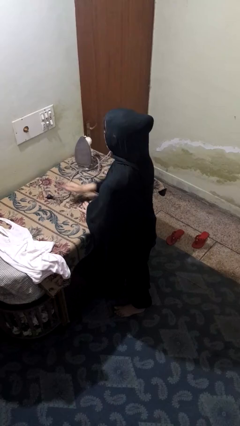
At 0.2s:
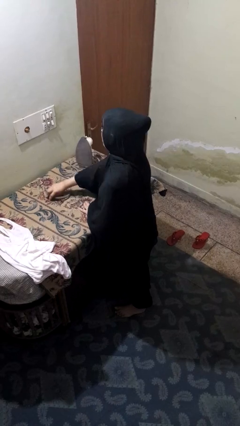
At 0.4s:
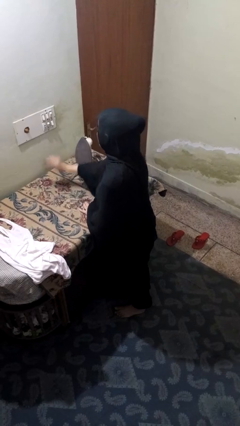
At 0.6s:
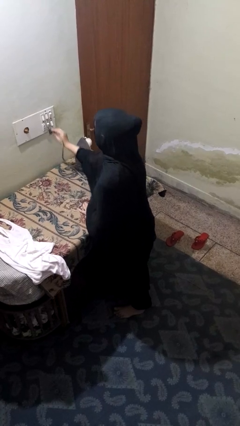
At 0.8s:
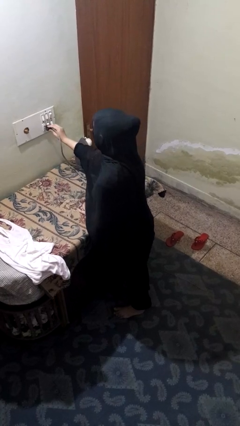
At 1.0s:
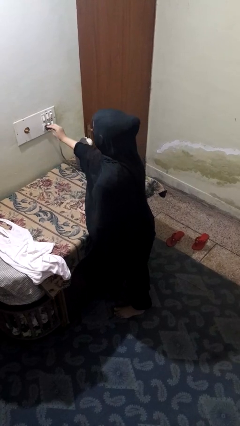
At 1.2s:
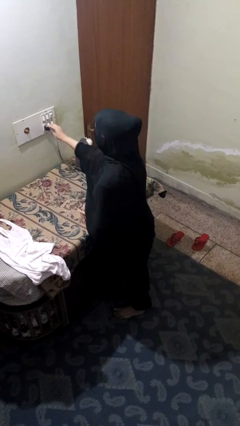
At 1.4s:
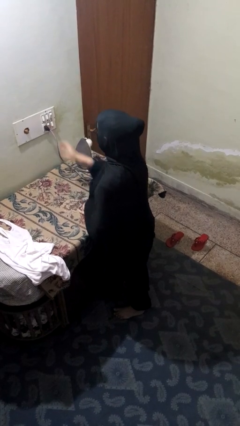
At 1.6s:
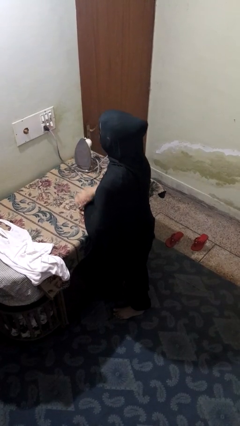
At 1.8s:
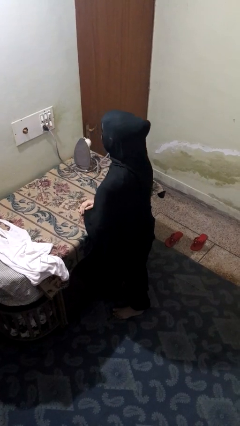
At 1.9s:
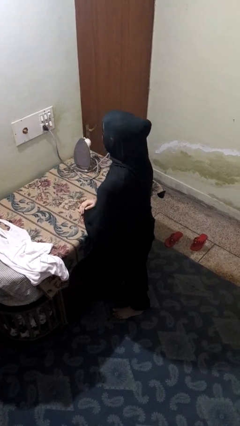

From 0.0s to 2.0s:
person plugs into electrical socket

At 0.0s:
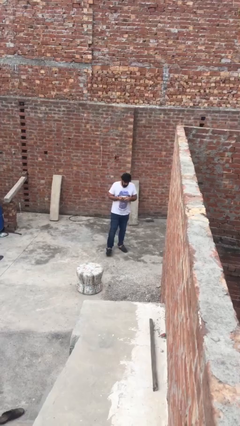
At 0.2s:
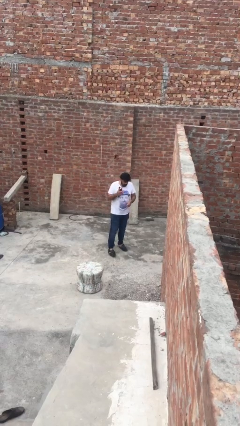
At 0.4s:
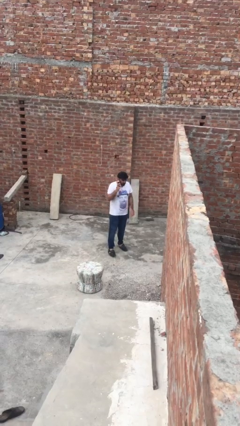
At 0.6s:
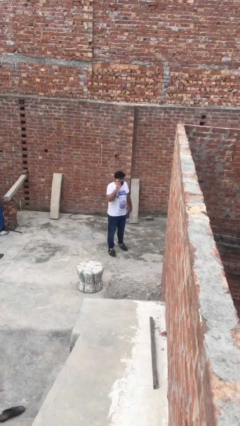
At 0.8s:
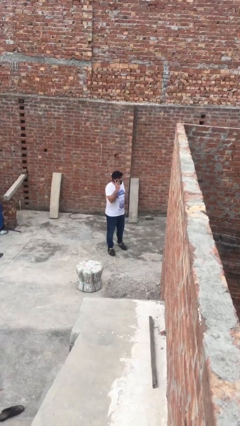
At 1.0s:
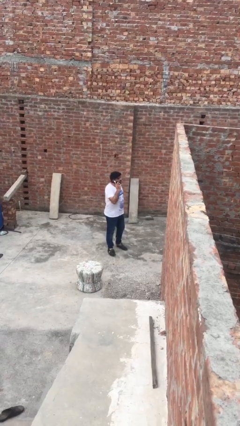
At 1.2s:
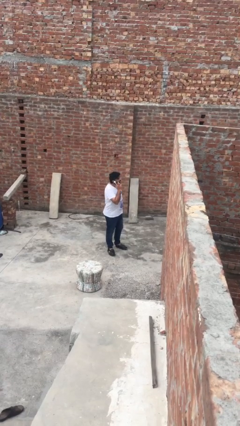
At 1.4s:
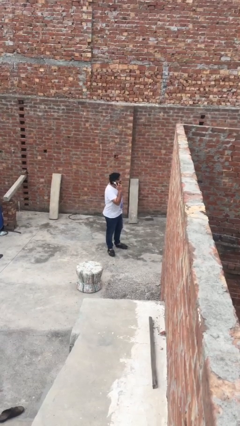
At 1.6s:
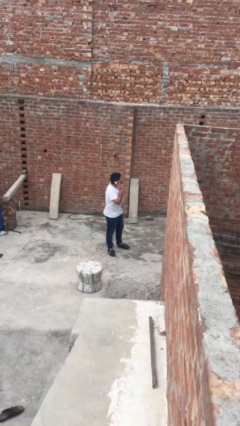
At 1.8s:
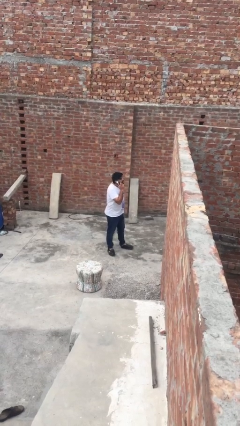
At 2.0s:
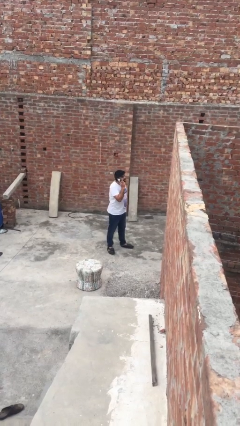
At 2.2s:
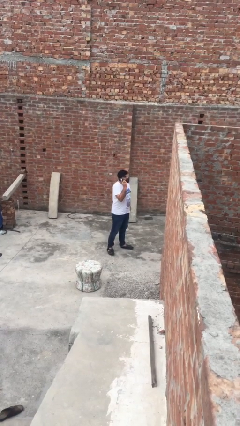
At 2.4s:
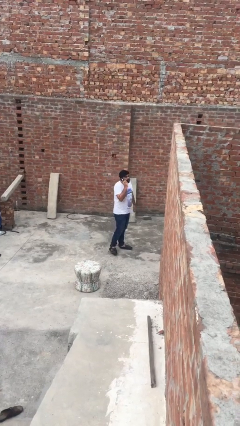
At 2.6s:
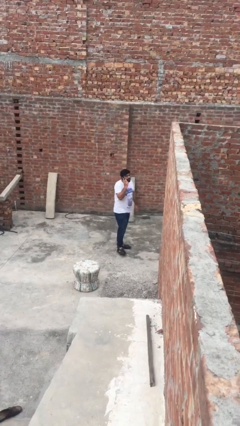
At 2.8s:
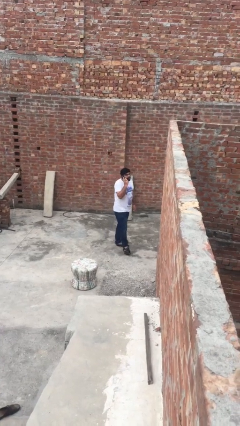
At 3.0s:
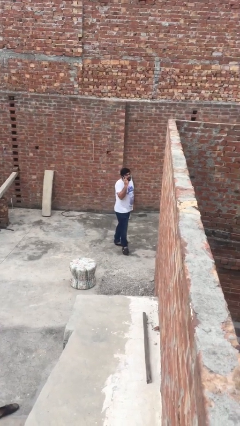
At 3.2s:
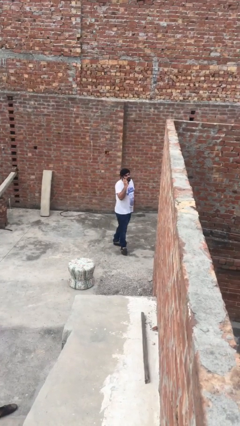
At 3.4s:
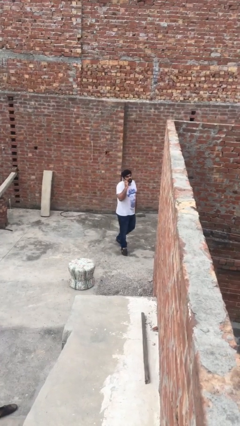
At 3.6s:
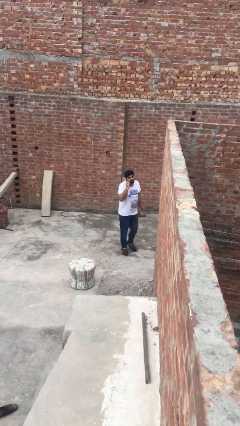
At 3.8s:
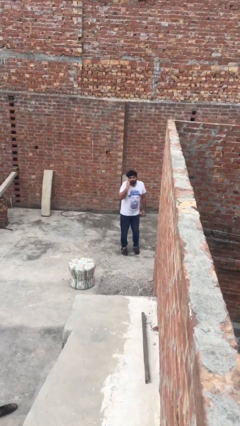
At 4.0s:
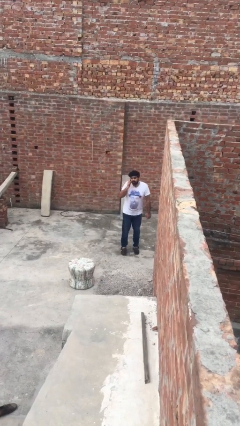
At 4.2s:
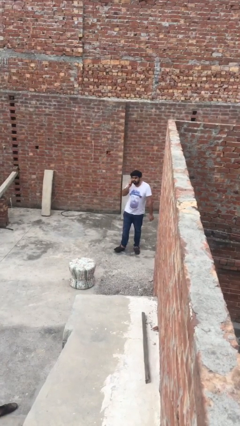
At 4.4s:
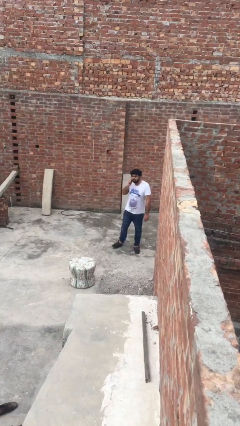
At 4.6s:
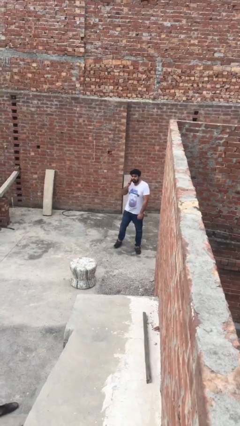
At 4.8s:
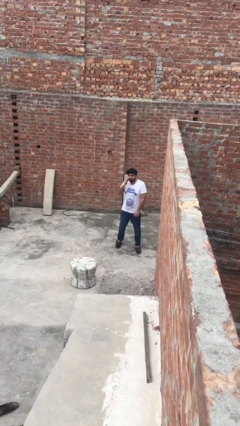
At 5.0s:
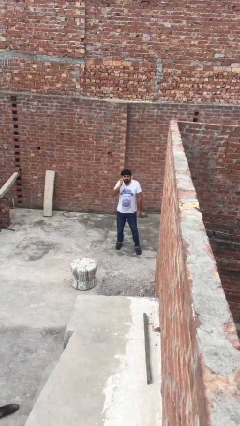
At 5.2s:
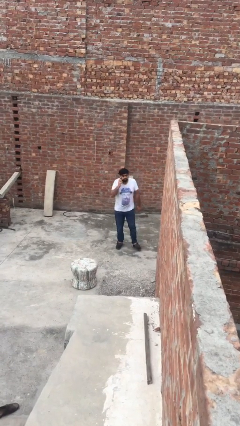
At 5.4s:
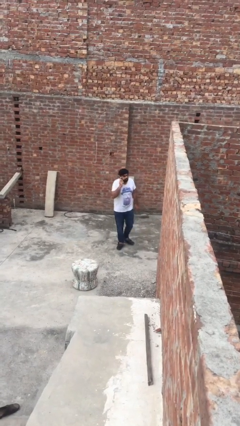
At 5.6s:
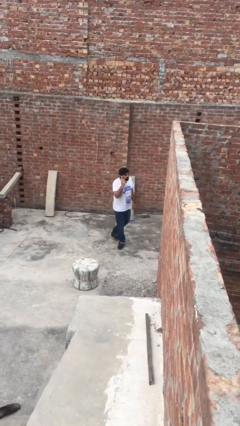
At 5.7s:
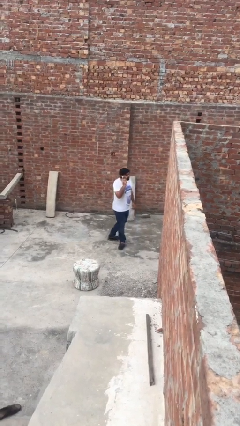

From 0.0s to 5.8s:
person talks on phone

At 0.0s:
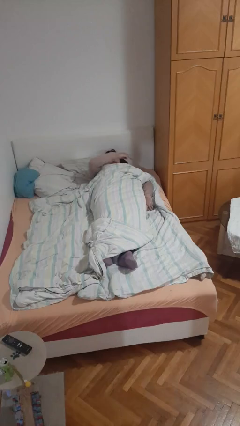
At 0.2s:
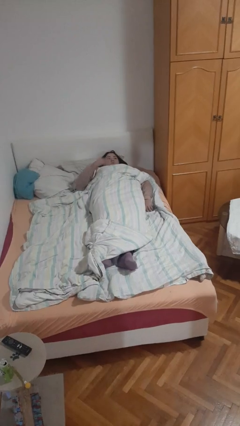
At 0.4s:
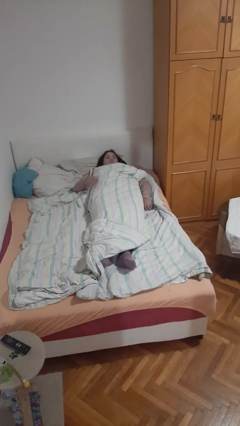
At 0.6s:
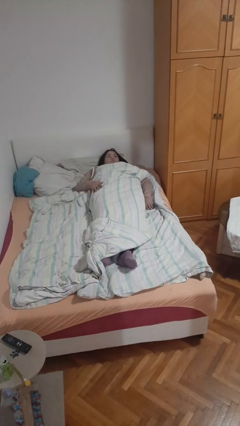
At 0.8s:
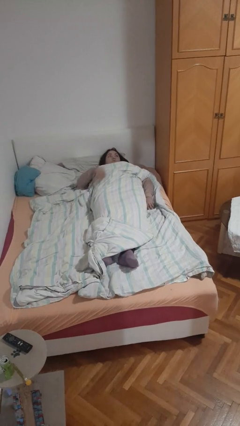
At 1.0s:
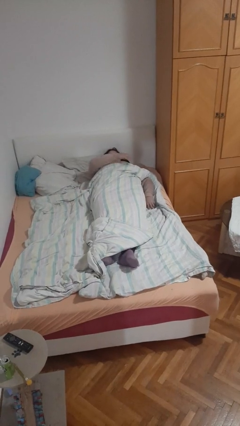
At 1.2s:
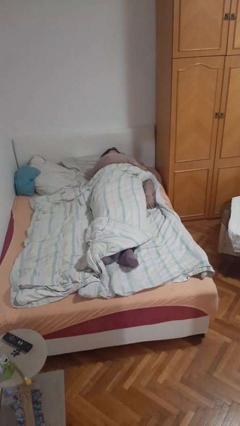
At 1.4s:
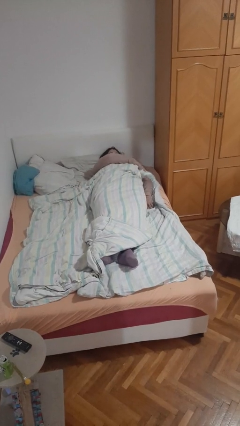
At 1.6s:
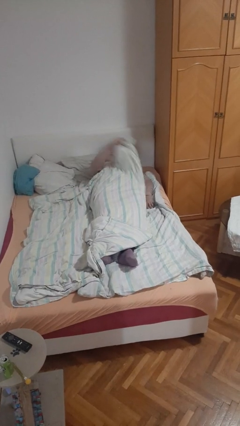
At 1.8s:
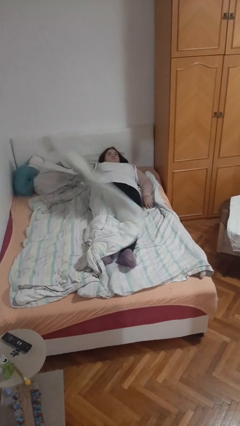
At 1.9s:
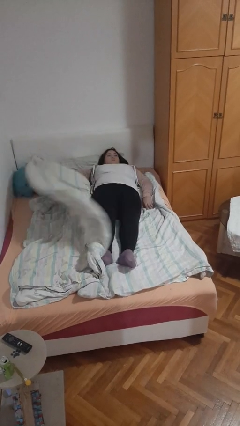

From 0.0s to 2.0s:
person uncovers with bedsheets

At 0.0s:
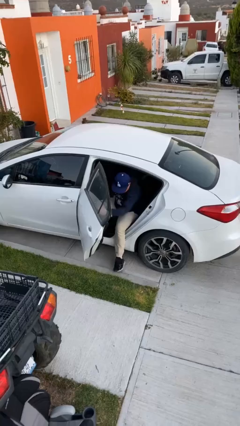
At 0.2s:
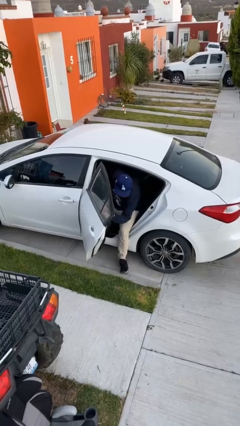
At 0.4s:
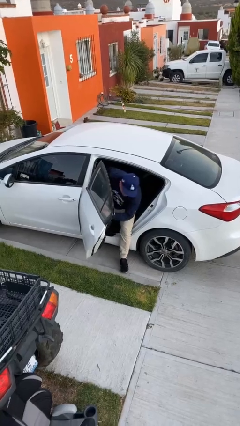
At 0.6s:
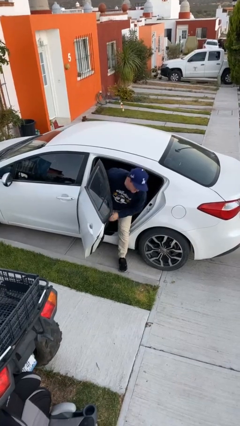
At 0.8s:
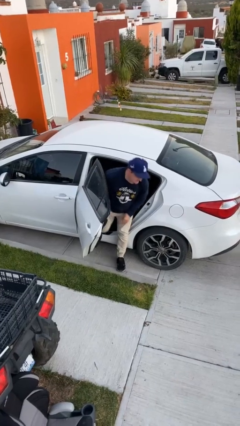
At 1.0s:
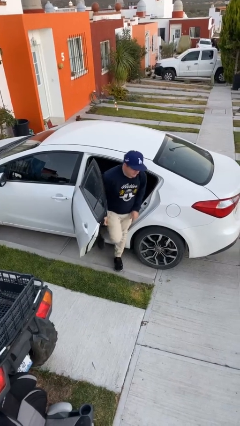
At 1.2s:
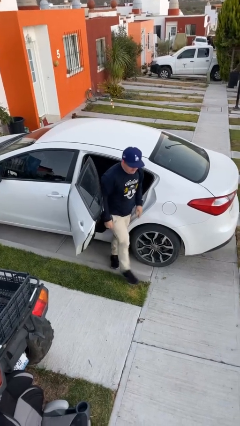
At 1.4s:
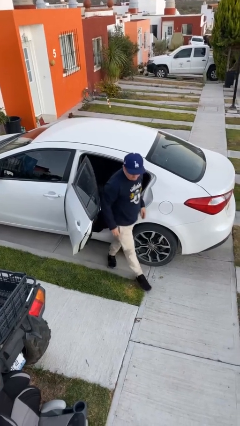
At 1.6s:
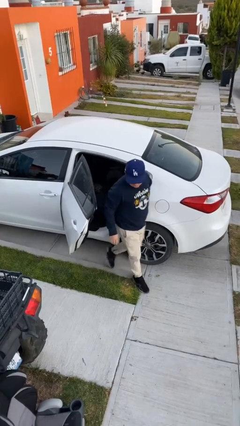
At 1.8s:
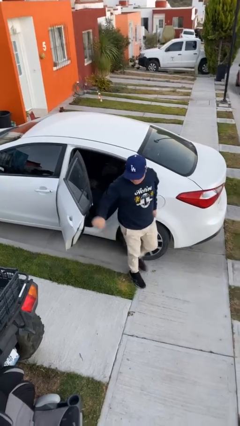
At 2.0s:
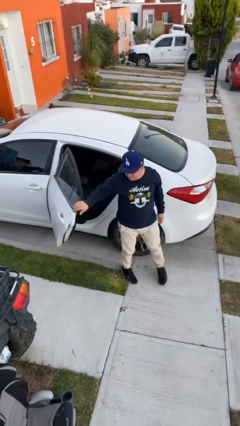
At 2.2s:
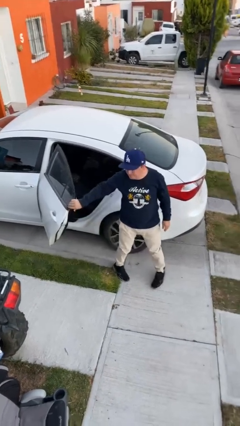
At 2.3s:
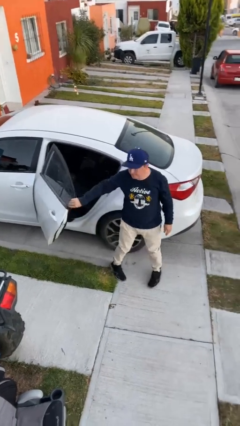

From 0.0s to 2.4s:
person exits car

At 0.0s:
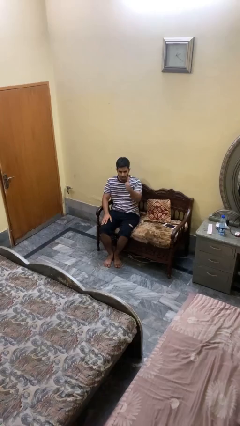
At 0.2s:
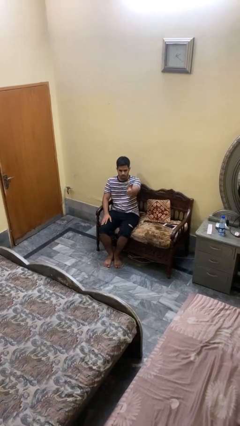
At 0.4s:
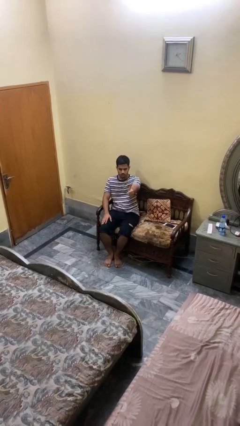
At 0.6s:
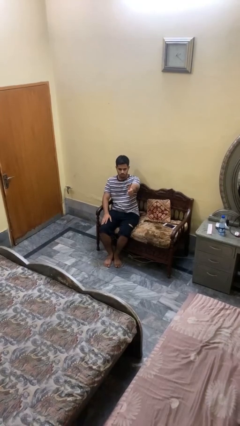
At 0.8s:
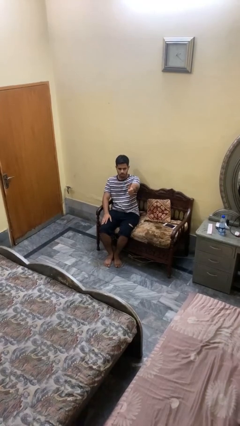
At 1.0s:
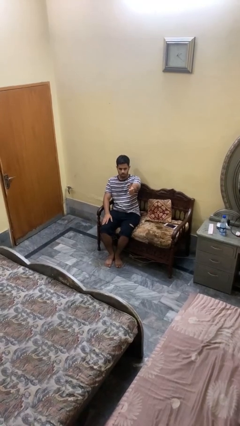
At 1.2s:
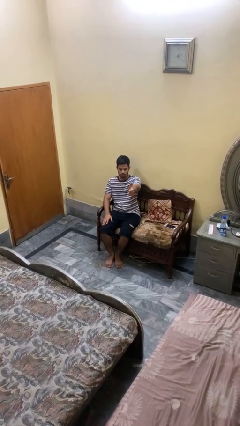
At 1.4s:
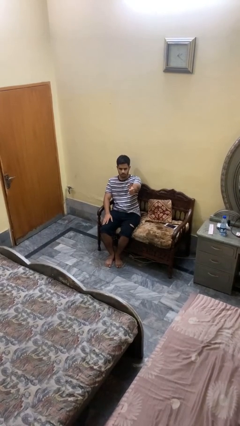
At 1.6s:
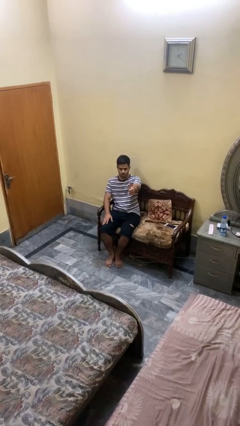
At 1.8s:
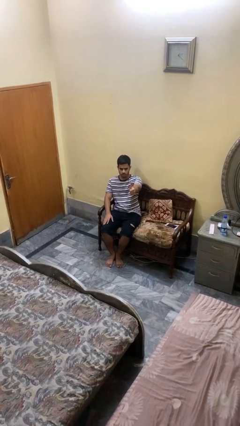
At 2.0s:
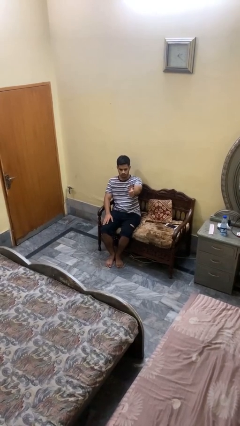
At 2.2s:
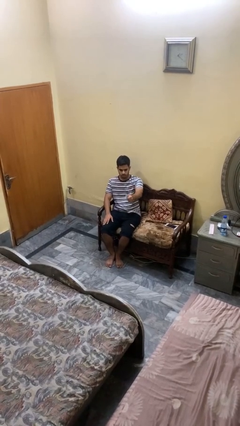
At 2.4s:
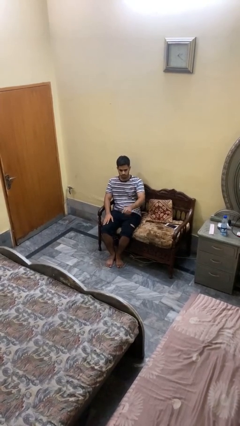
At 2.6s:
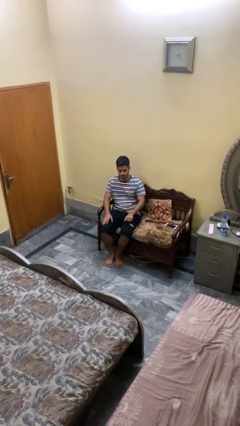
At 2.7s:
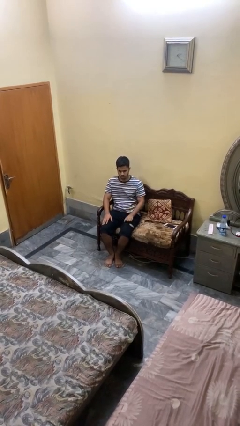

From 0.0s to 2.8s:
person gestures thumbs up

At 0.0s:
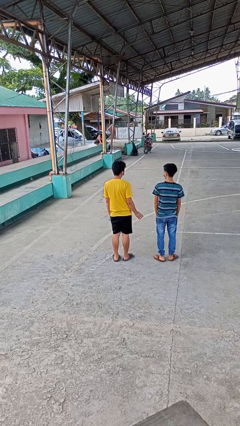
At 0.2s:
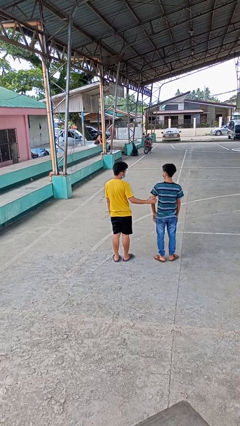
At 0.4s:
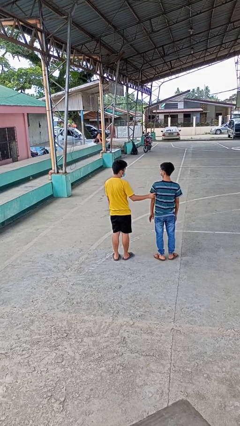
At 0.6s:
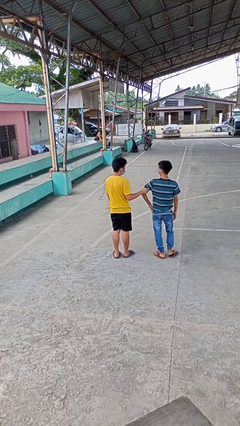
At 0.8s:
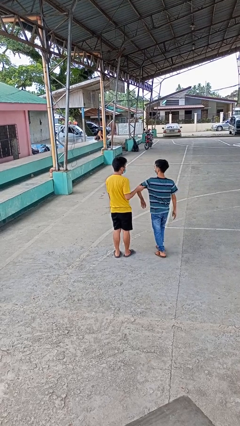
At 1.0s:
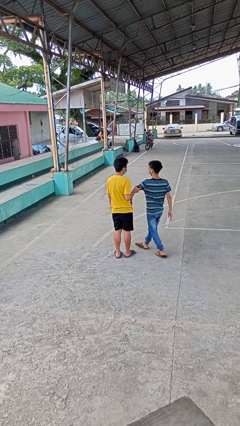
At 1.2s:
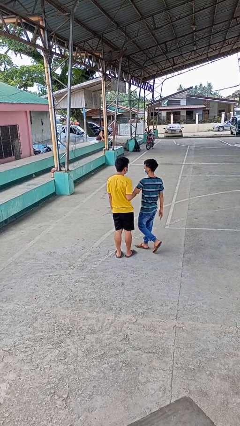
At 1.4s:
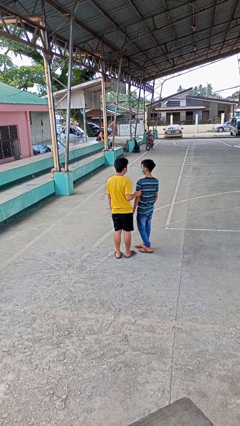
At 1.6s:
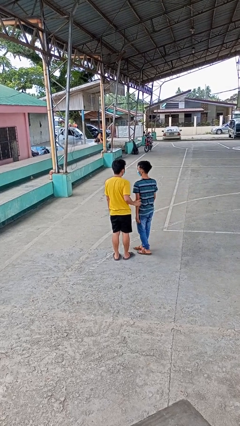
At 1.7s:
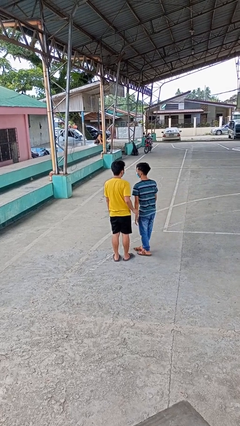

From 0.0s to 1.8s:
person grabs person by bicep

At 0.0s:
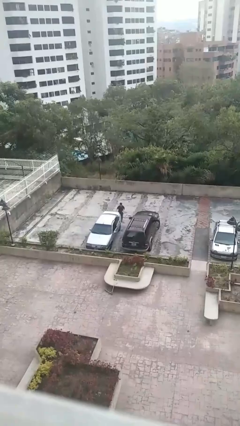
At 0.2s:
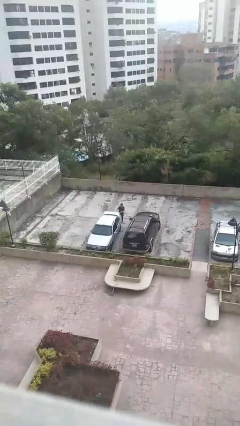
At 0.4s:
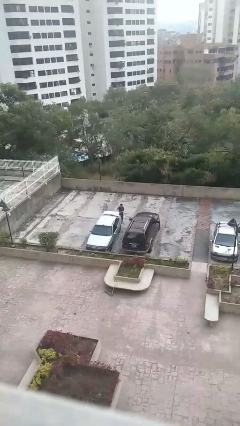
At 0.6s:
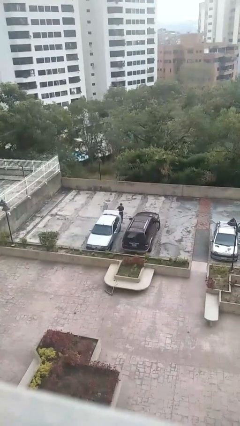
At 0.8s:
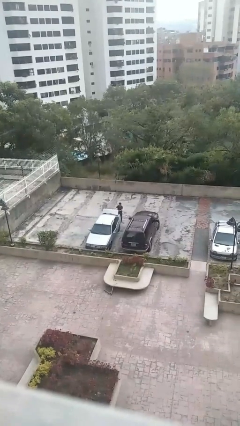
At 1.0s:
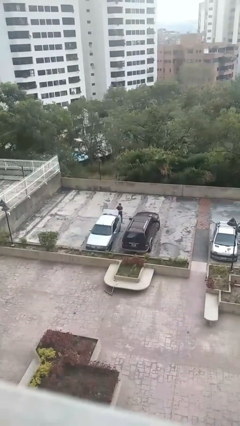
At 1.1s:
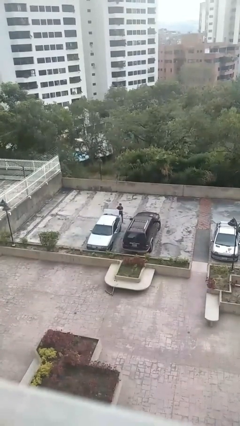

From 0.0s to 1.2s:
person opens car trunk
